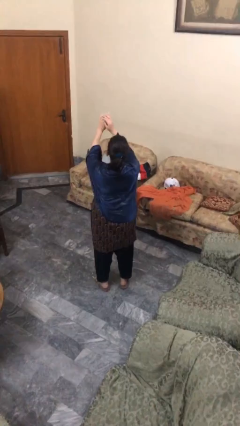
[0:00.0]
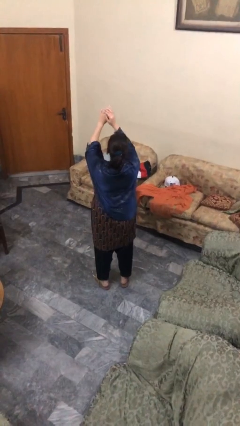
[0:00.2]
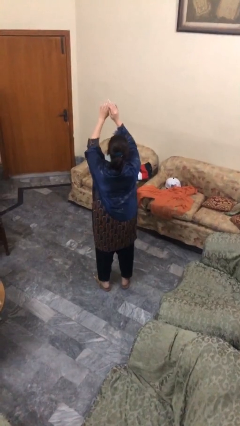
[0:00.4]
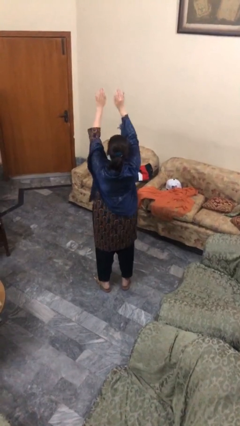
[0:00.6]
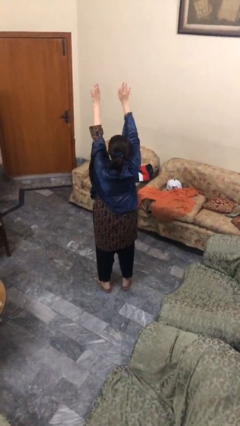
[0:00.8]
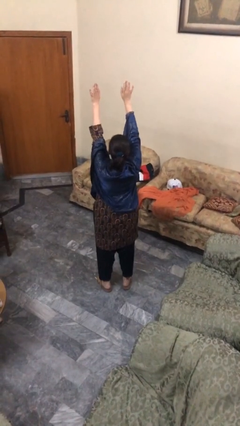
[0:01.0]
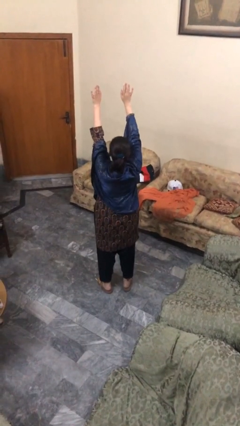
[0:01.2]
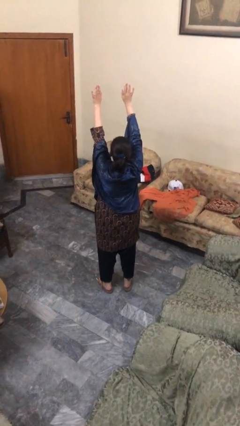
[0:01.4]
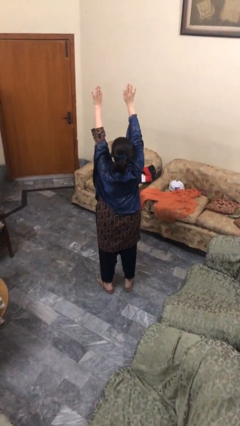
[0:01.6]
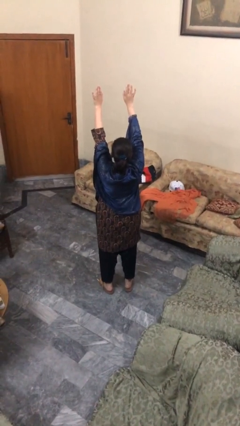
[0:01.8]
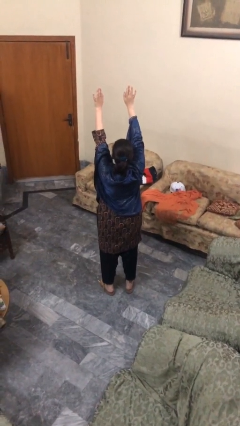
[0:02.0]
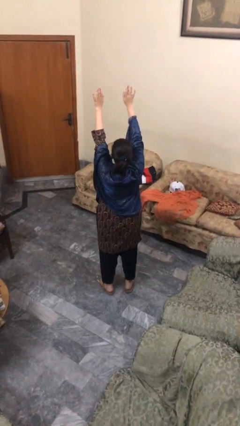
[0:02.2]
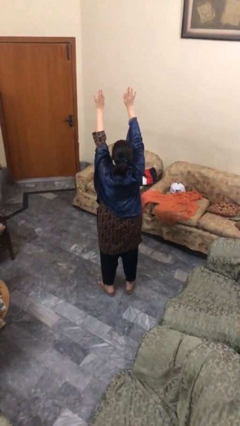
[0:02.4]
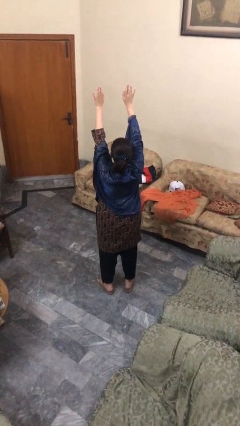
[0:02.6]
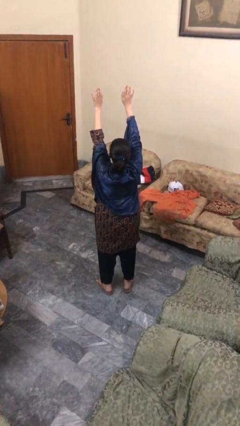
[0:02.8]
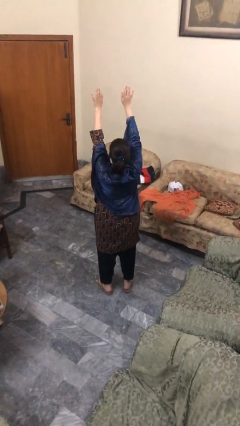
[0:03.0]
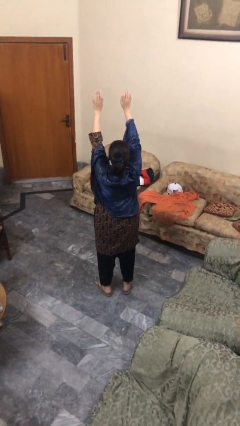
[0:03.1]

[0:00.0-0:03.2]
person stretches arms over head

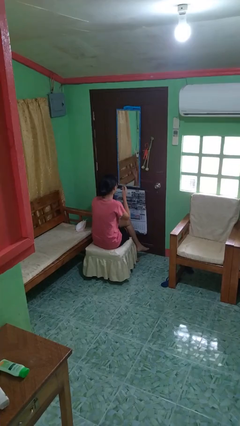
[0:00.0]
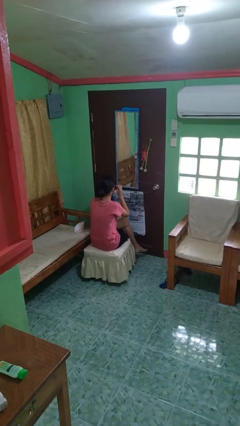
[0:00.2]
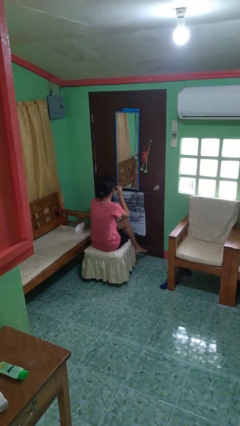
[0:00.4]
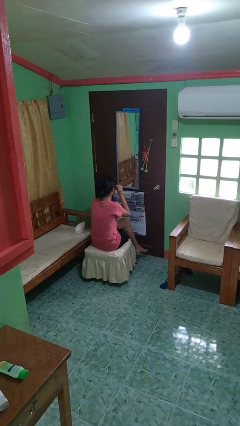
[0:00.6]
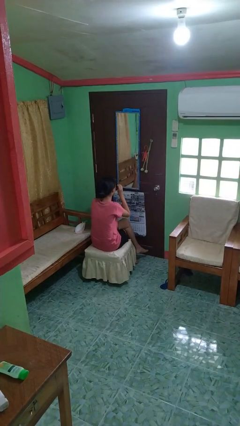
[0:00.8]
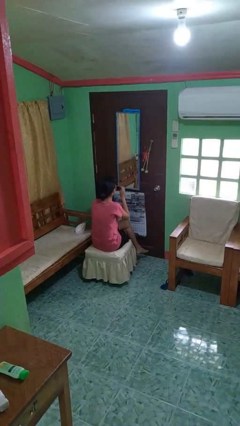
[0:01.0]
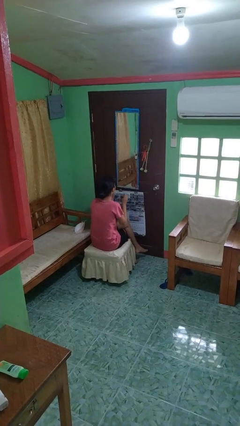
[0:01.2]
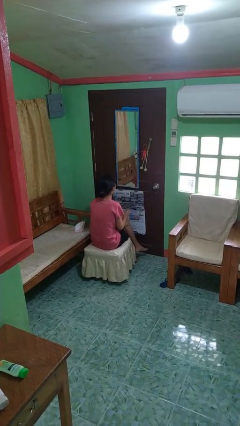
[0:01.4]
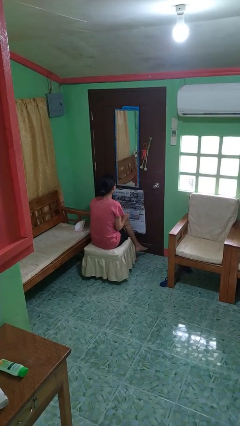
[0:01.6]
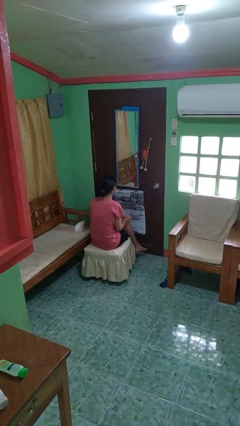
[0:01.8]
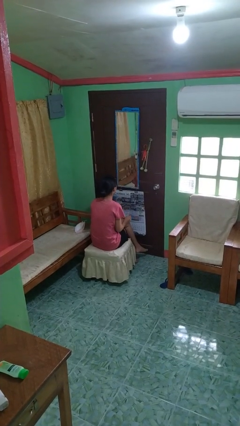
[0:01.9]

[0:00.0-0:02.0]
person takes off sunglasses

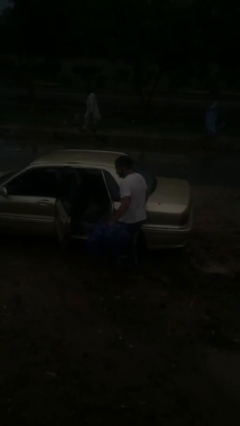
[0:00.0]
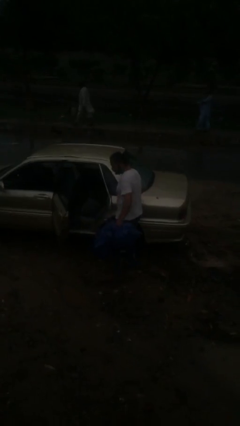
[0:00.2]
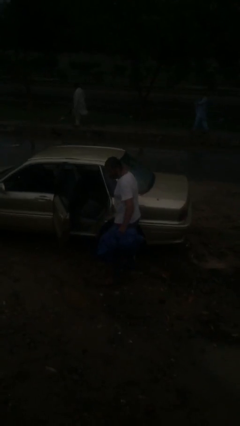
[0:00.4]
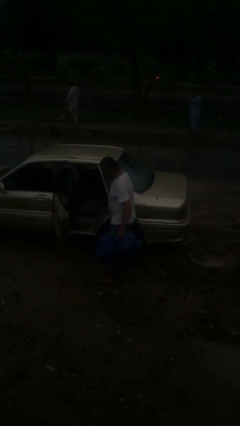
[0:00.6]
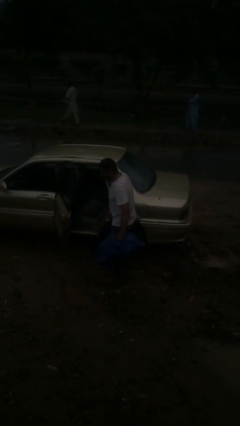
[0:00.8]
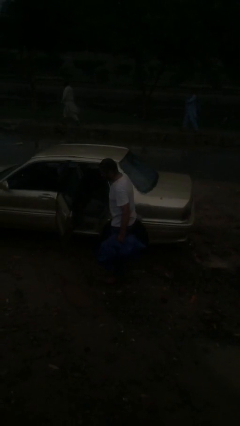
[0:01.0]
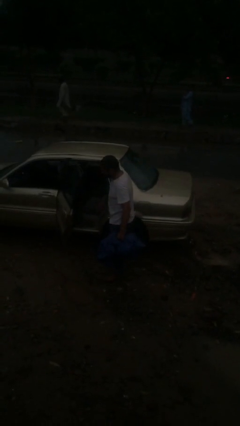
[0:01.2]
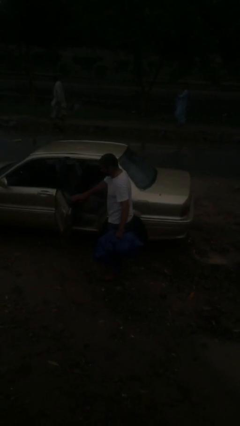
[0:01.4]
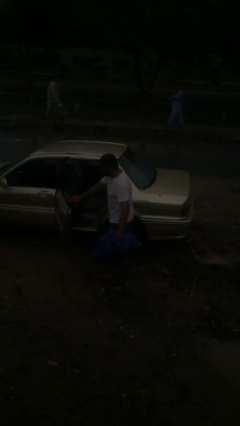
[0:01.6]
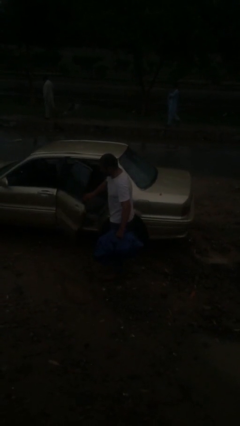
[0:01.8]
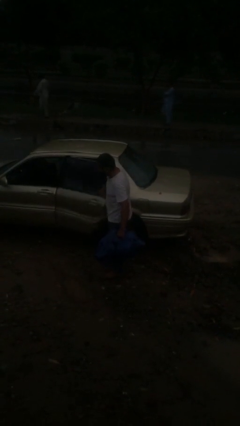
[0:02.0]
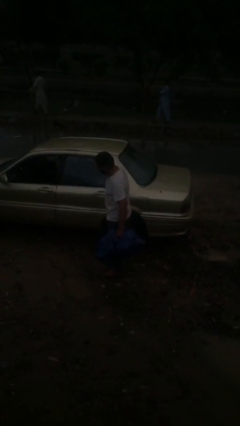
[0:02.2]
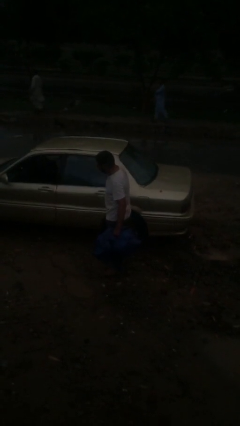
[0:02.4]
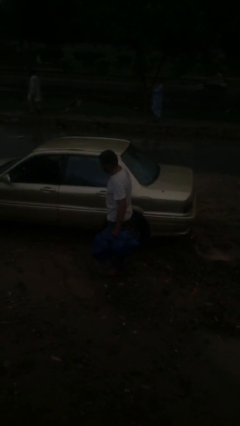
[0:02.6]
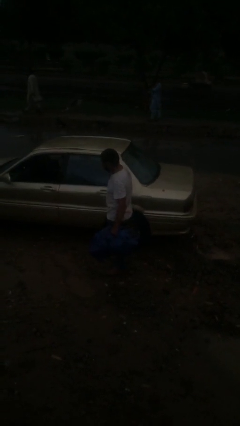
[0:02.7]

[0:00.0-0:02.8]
person closes car door

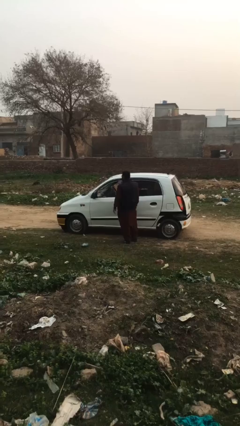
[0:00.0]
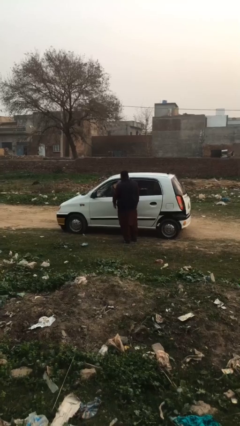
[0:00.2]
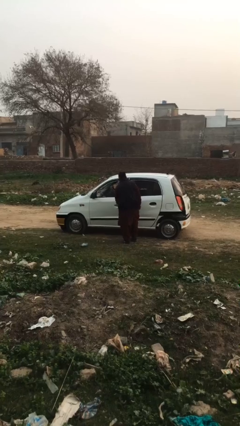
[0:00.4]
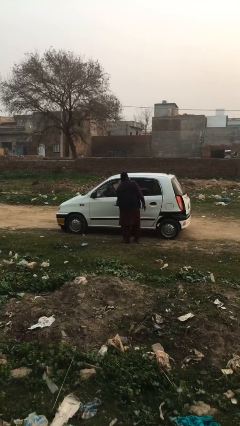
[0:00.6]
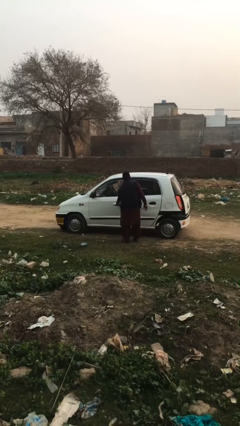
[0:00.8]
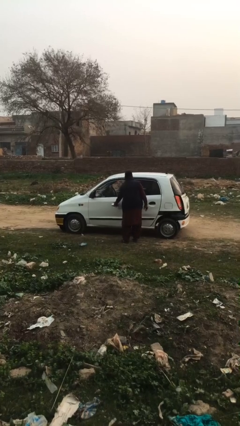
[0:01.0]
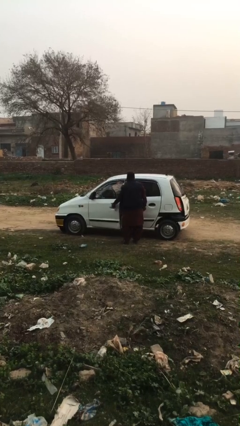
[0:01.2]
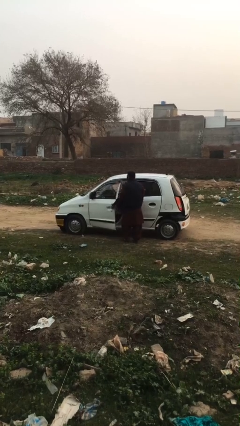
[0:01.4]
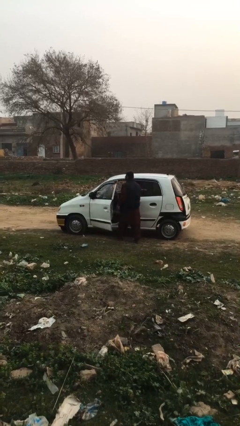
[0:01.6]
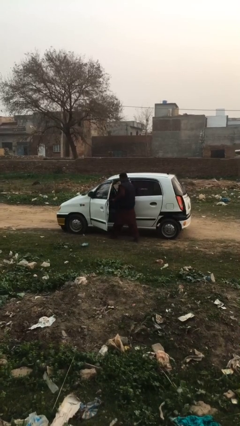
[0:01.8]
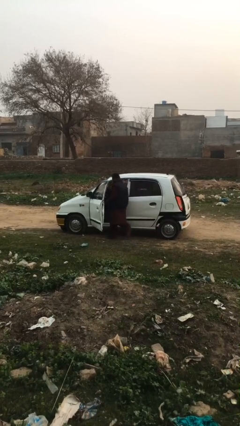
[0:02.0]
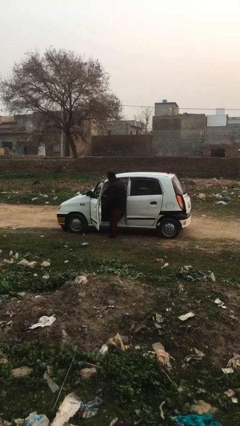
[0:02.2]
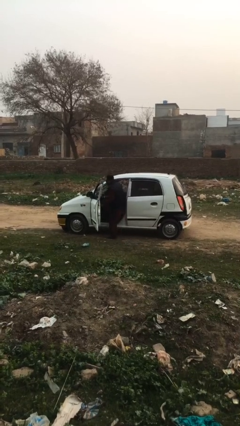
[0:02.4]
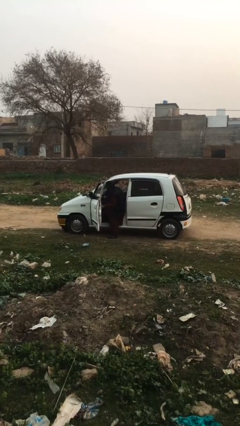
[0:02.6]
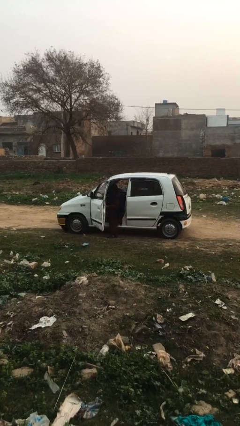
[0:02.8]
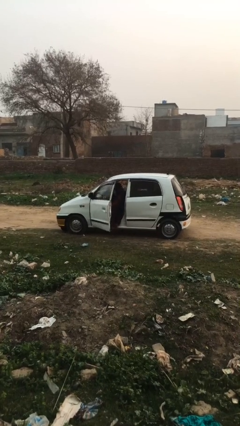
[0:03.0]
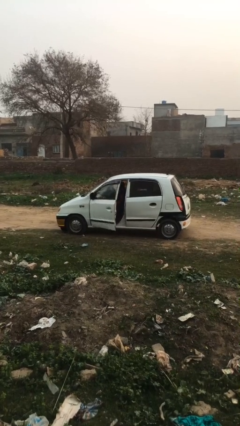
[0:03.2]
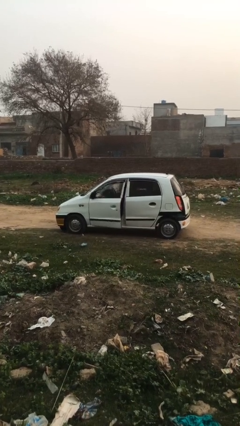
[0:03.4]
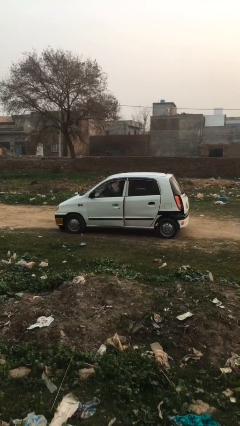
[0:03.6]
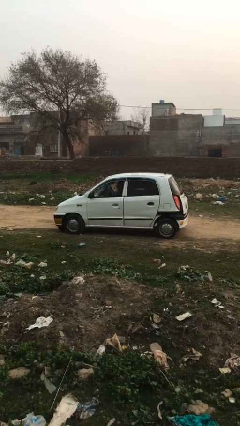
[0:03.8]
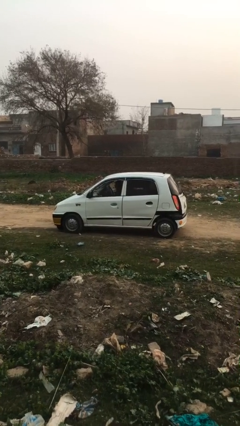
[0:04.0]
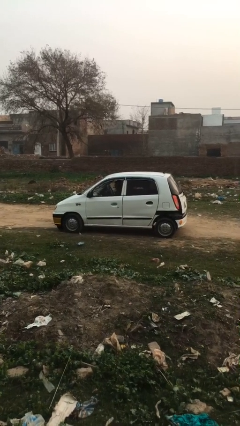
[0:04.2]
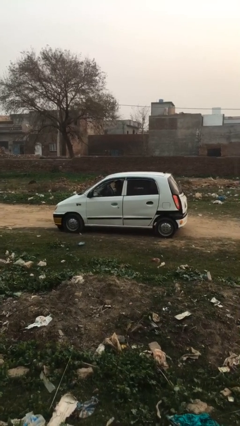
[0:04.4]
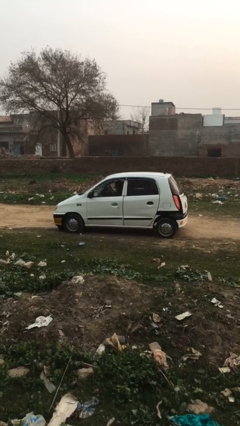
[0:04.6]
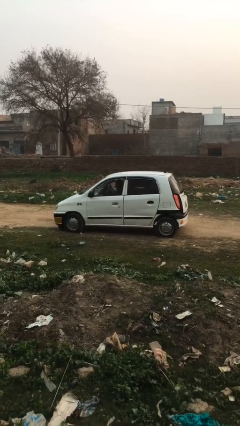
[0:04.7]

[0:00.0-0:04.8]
car picks up person

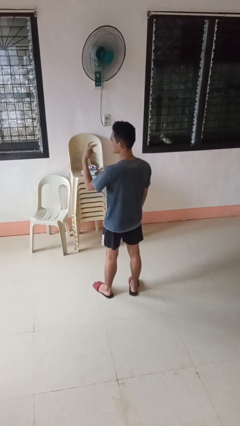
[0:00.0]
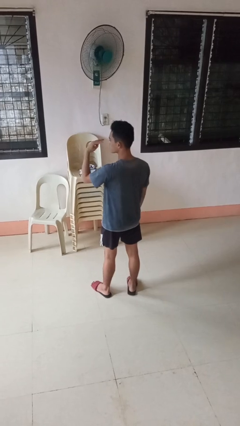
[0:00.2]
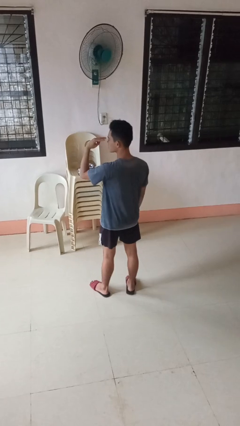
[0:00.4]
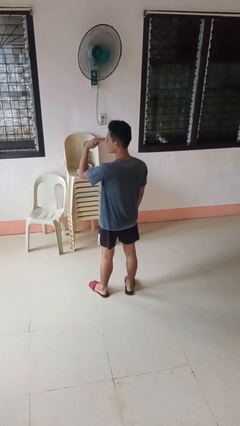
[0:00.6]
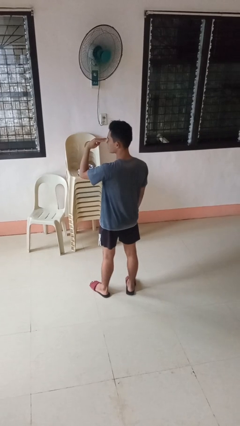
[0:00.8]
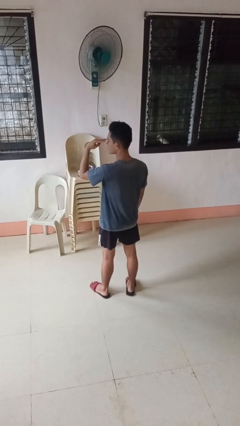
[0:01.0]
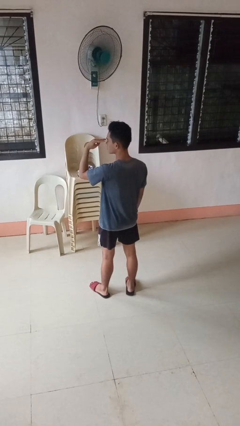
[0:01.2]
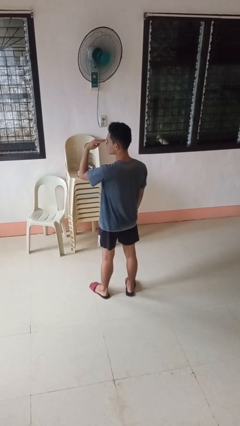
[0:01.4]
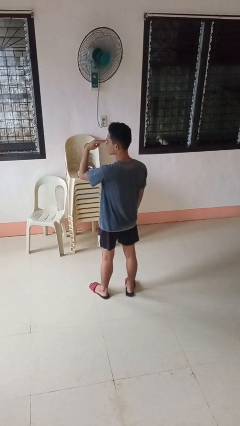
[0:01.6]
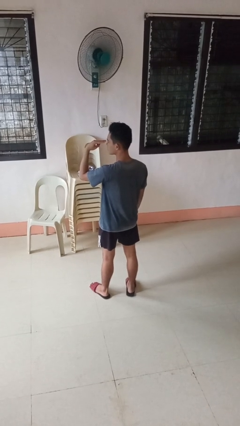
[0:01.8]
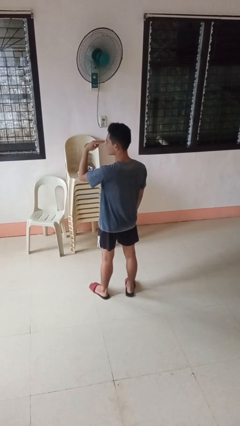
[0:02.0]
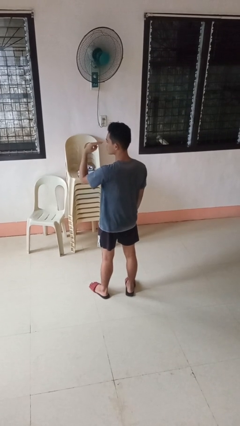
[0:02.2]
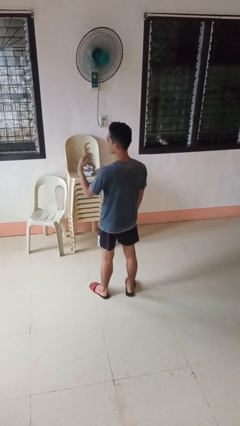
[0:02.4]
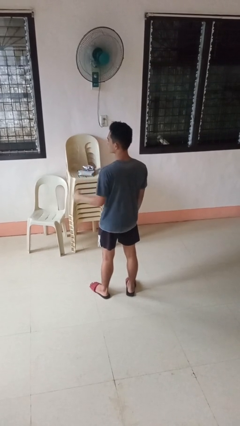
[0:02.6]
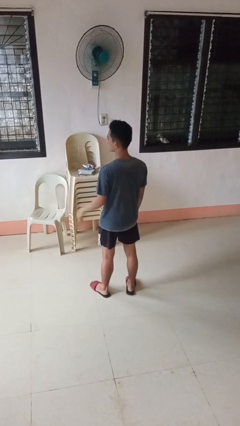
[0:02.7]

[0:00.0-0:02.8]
person gestures watch closely

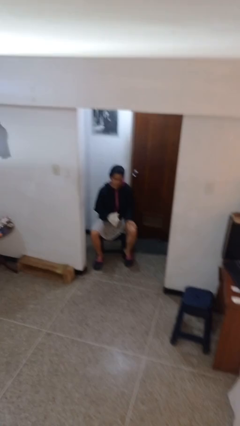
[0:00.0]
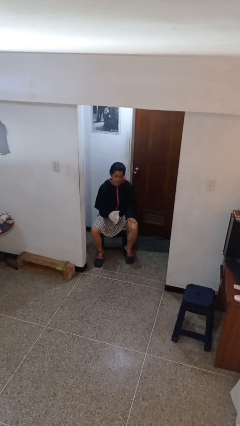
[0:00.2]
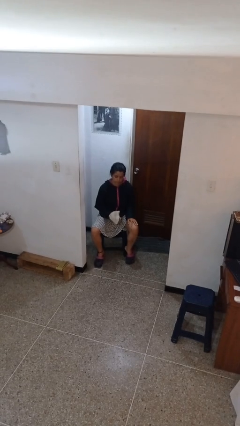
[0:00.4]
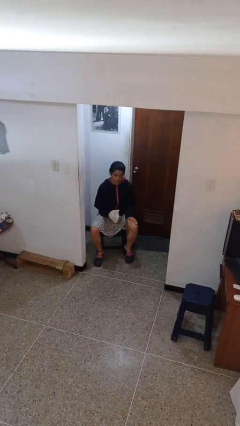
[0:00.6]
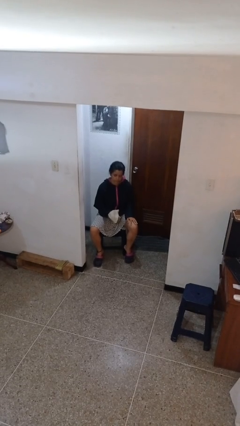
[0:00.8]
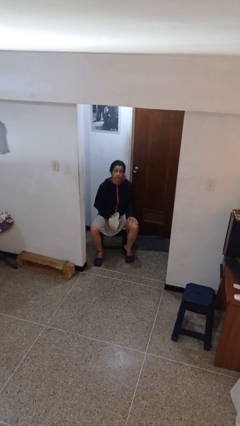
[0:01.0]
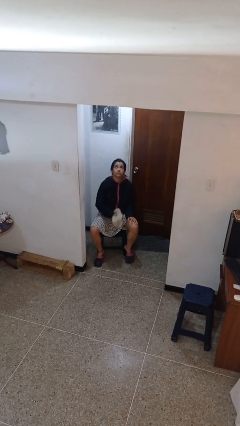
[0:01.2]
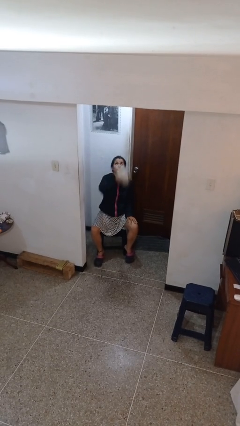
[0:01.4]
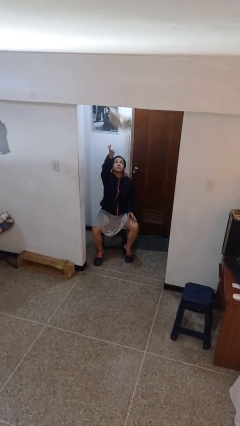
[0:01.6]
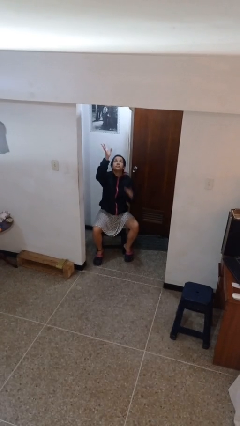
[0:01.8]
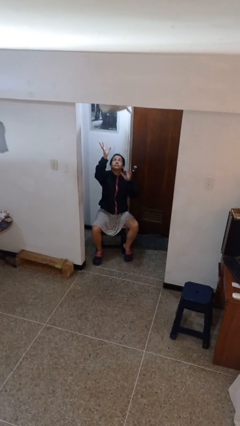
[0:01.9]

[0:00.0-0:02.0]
person drops object
